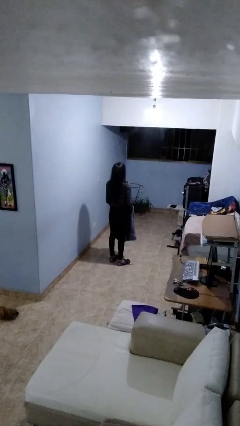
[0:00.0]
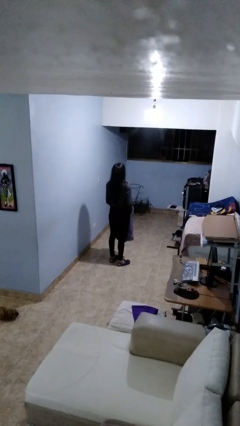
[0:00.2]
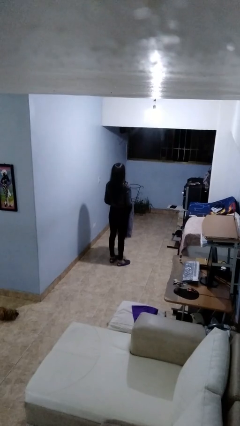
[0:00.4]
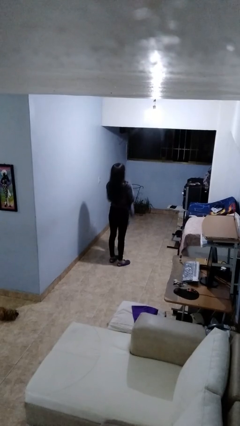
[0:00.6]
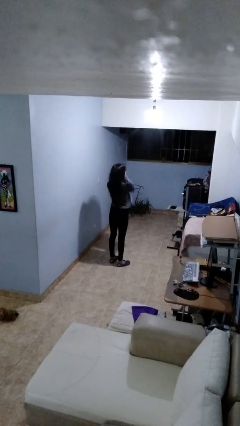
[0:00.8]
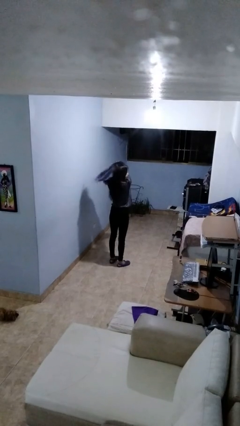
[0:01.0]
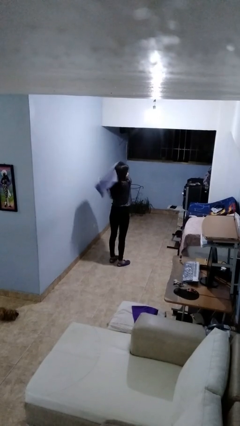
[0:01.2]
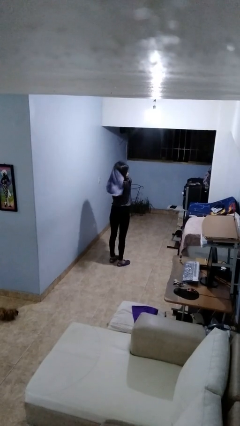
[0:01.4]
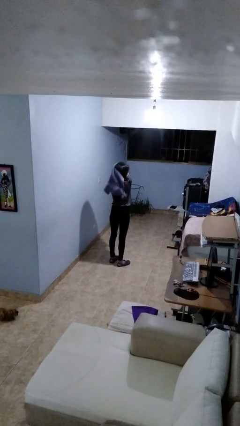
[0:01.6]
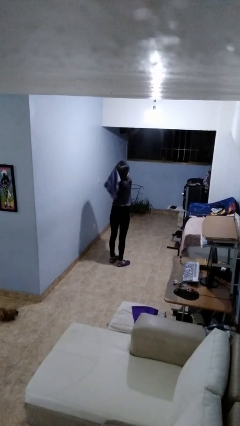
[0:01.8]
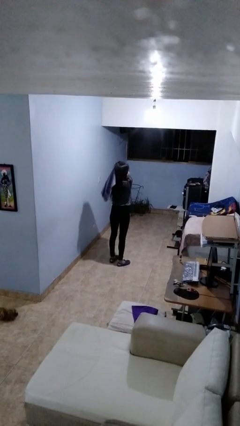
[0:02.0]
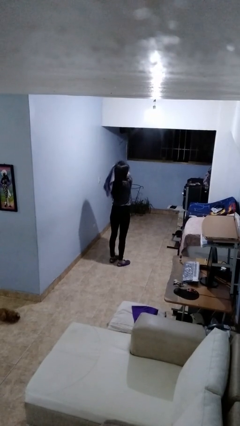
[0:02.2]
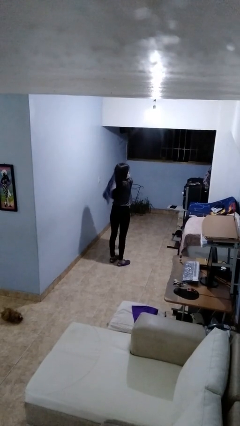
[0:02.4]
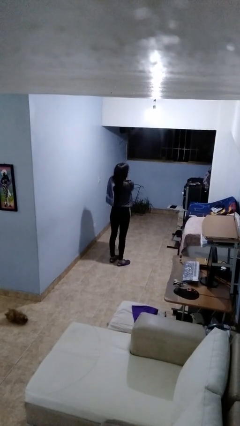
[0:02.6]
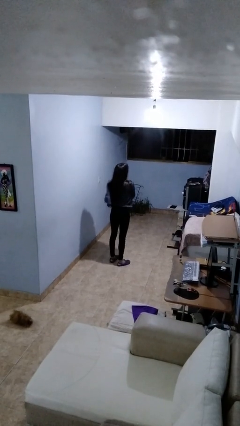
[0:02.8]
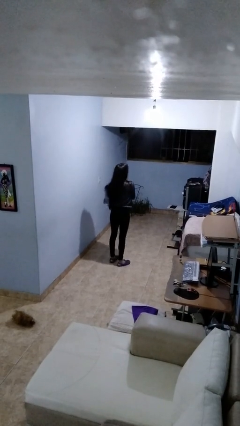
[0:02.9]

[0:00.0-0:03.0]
person dries hair with towel

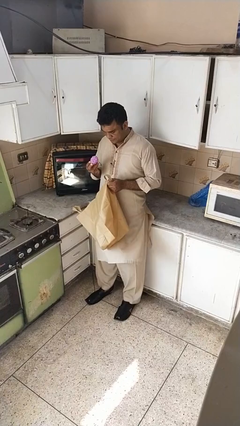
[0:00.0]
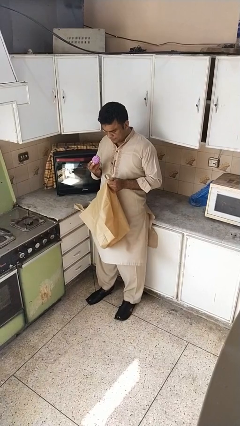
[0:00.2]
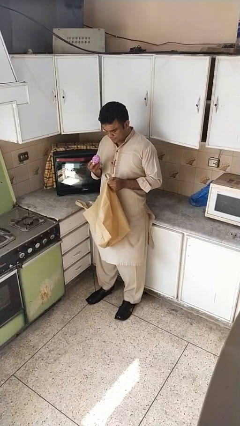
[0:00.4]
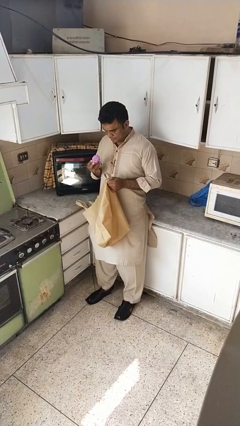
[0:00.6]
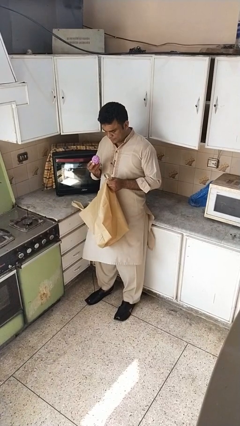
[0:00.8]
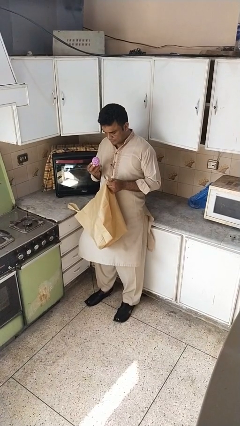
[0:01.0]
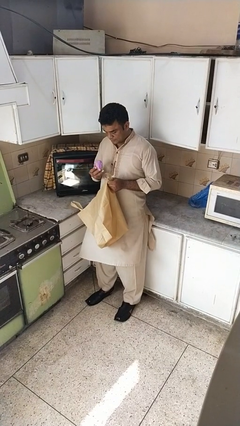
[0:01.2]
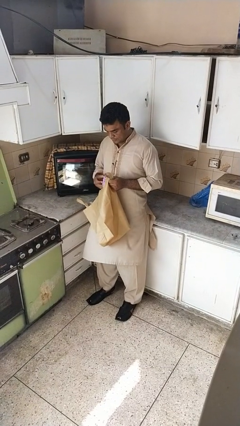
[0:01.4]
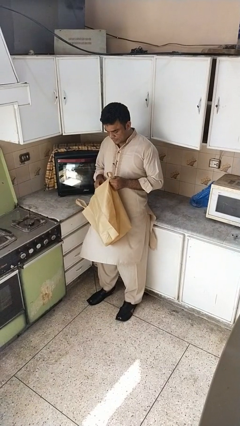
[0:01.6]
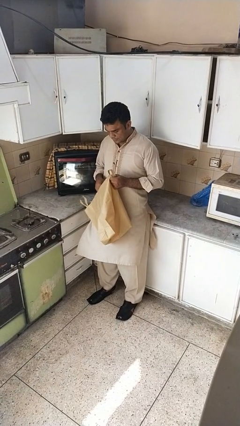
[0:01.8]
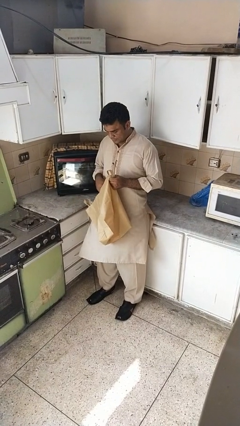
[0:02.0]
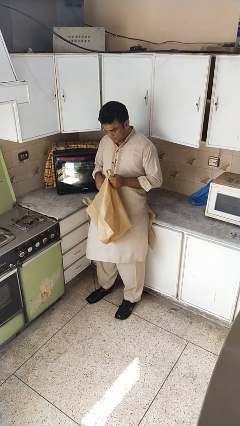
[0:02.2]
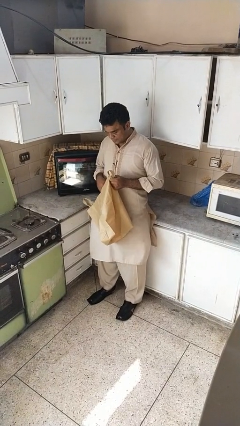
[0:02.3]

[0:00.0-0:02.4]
person puts object into bag

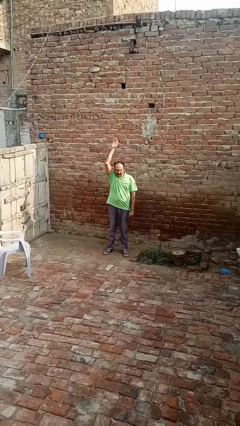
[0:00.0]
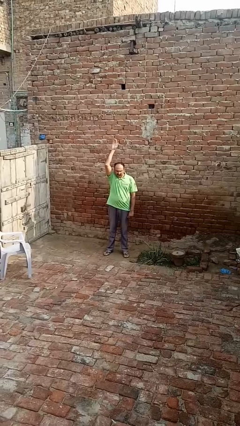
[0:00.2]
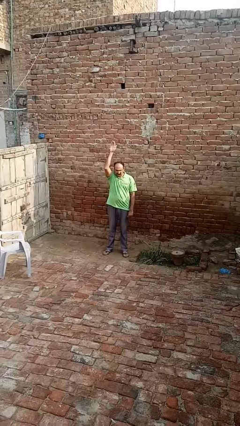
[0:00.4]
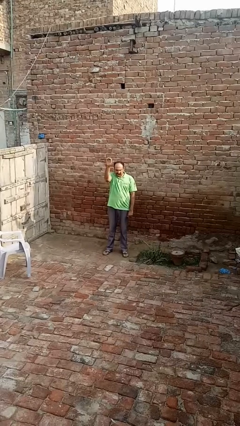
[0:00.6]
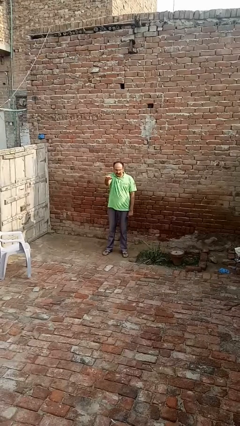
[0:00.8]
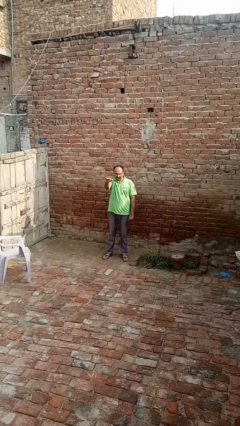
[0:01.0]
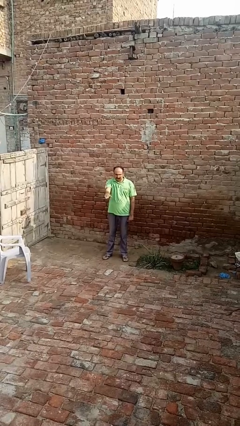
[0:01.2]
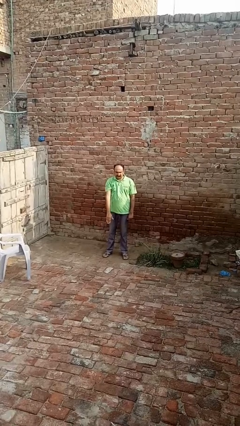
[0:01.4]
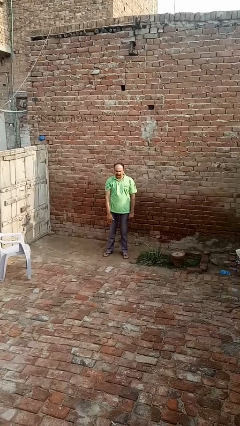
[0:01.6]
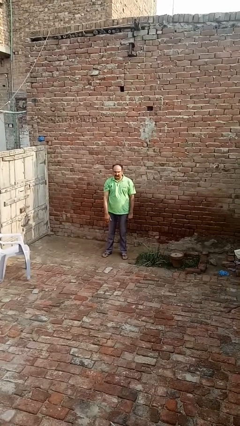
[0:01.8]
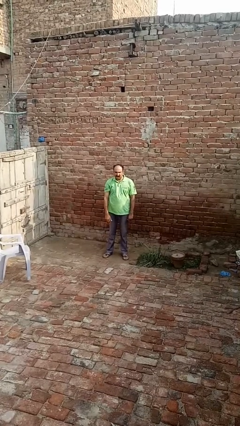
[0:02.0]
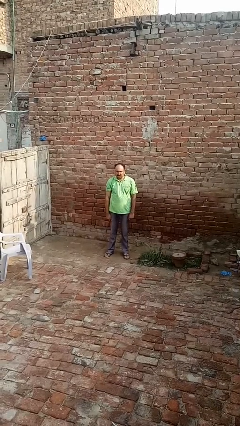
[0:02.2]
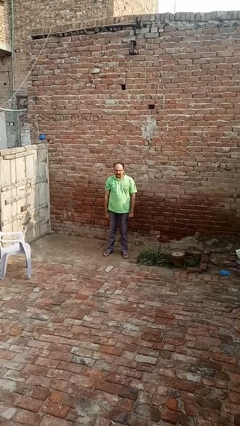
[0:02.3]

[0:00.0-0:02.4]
person gestures swipe down

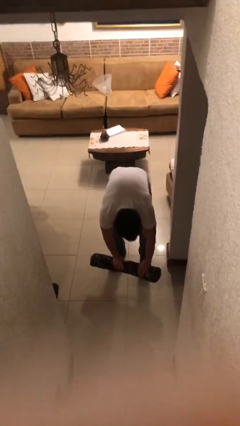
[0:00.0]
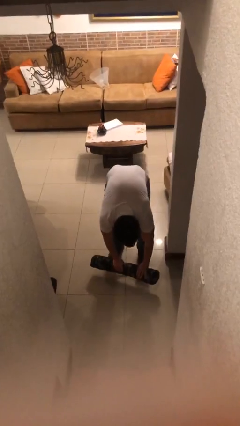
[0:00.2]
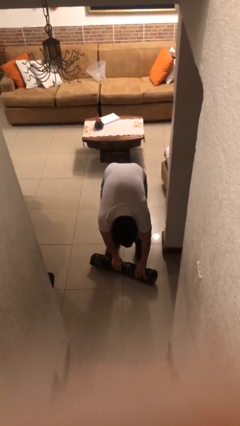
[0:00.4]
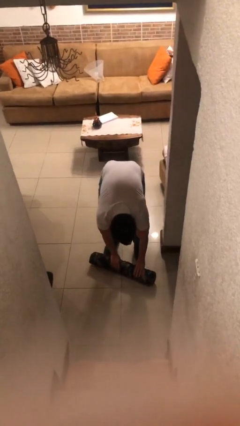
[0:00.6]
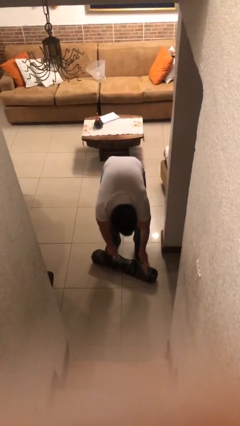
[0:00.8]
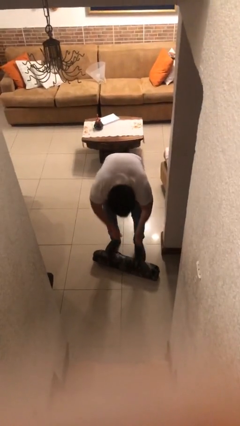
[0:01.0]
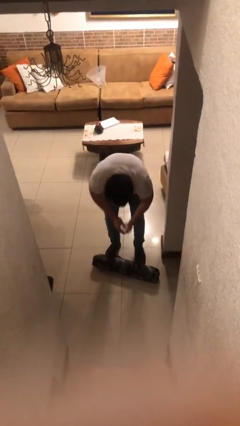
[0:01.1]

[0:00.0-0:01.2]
person puts down object on floor

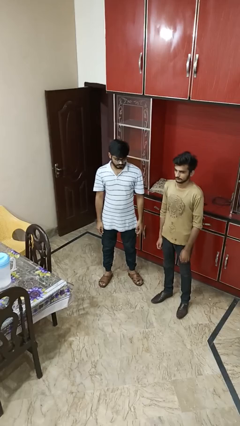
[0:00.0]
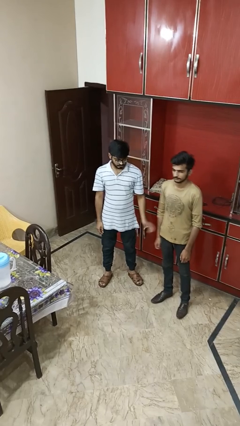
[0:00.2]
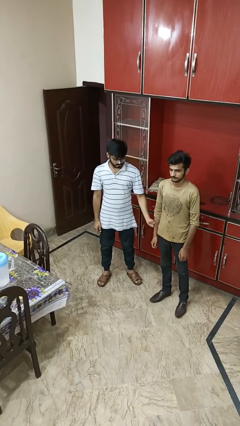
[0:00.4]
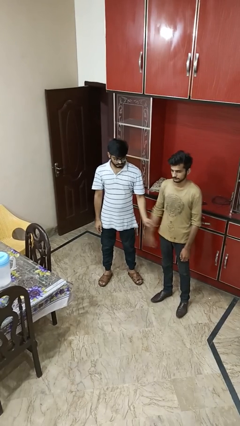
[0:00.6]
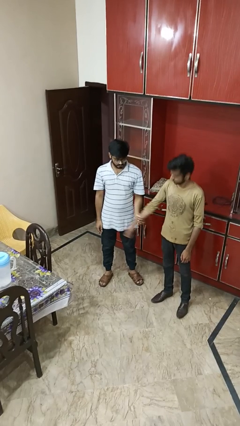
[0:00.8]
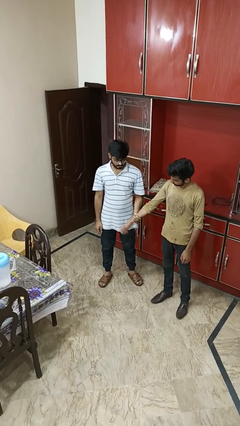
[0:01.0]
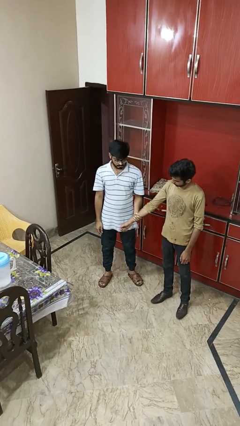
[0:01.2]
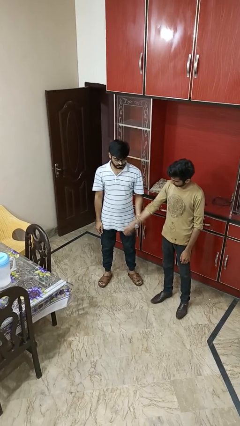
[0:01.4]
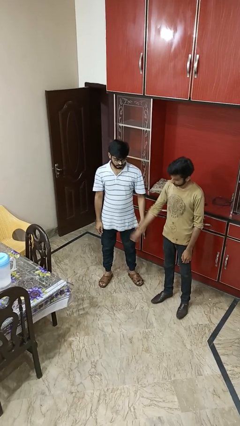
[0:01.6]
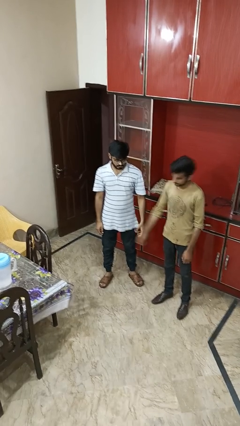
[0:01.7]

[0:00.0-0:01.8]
person grabs person by forearm

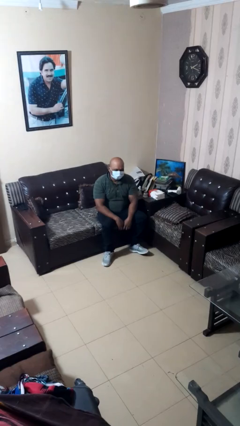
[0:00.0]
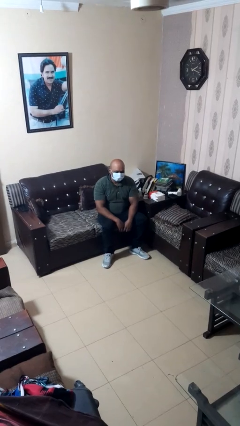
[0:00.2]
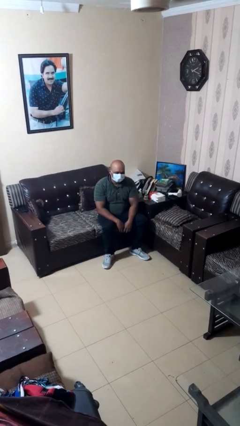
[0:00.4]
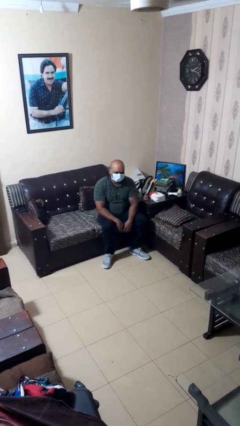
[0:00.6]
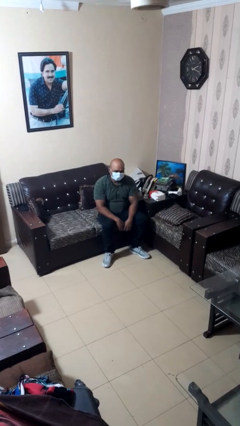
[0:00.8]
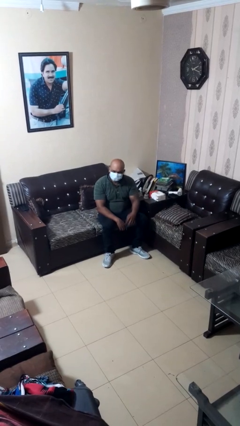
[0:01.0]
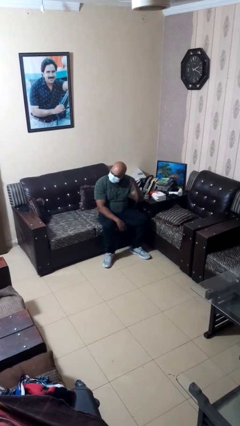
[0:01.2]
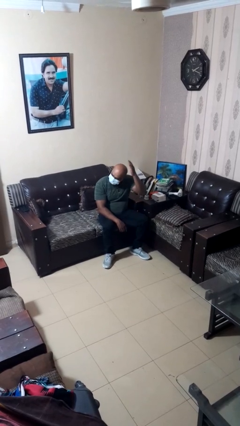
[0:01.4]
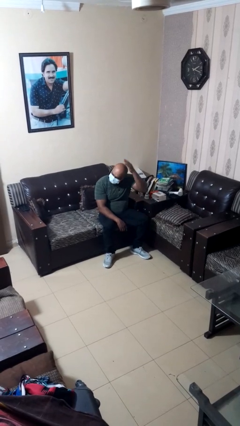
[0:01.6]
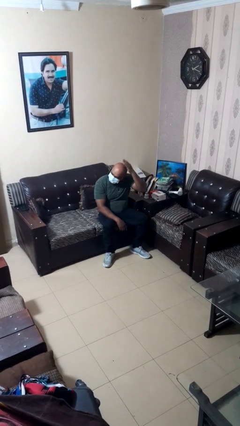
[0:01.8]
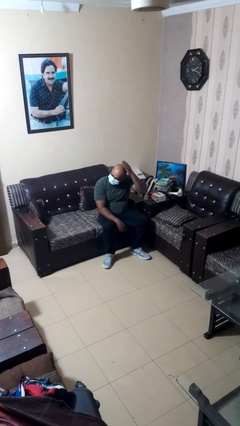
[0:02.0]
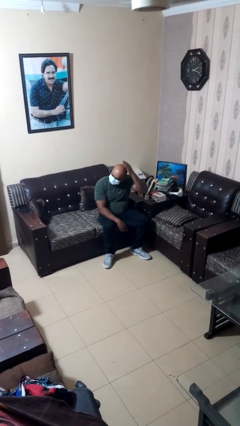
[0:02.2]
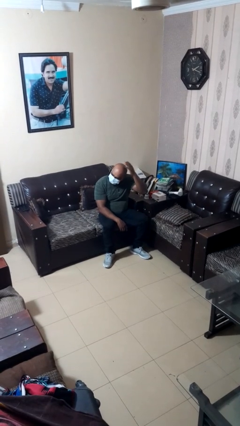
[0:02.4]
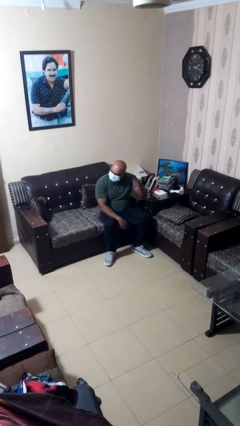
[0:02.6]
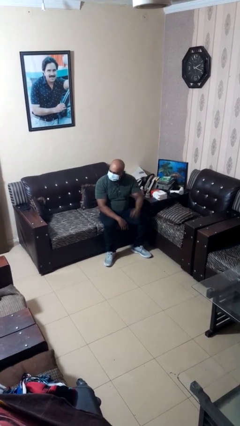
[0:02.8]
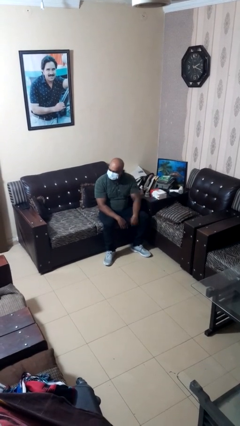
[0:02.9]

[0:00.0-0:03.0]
person pats head

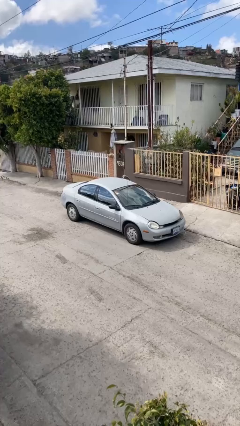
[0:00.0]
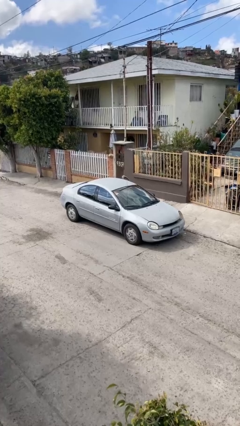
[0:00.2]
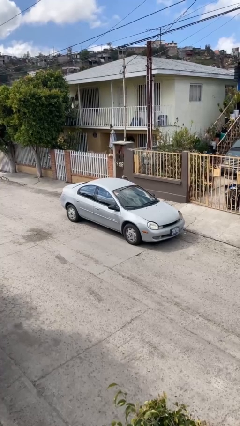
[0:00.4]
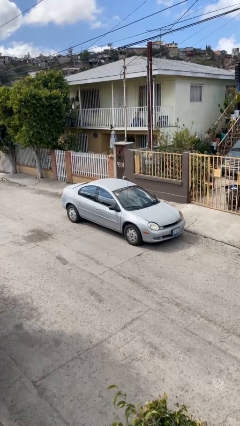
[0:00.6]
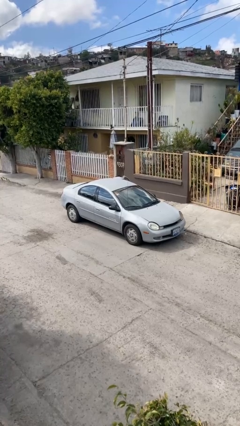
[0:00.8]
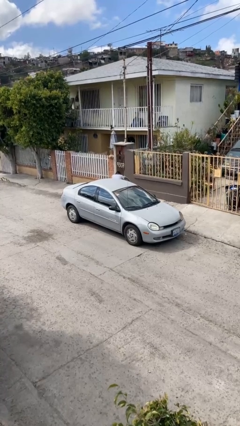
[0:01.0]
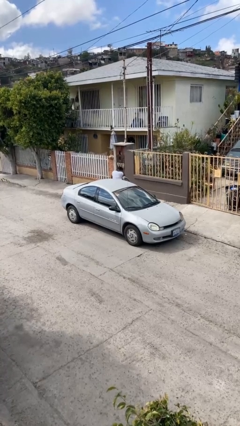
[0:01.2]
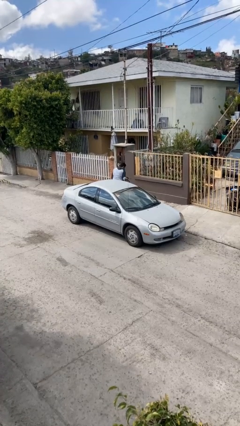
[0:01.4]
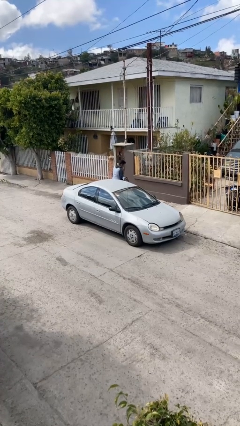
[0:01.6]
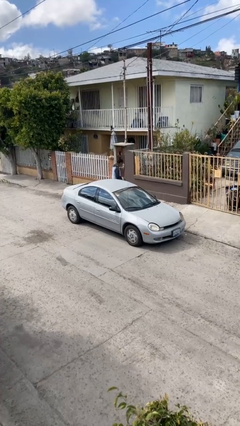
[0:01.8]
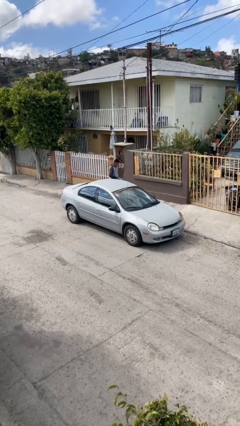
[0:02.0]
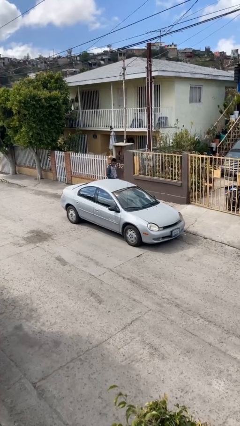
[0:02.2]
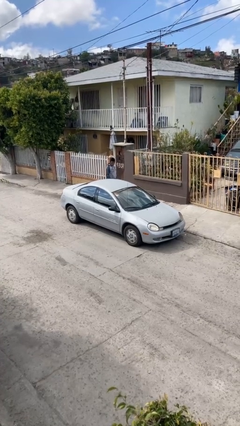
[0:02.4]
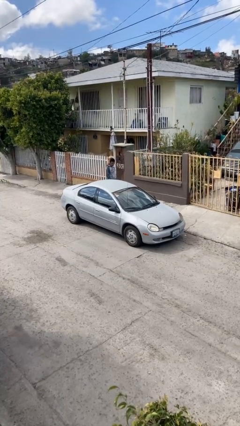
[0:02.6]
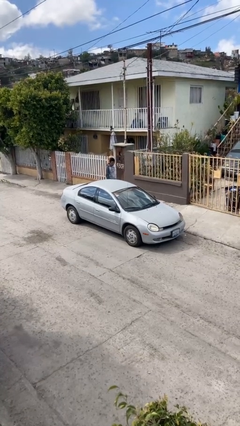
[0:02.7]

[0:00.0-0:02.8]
car drops off person

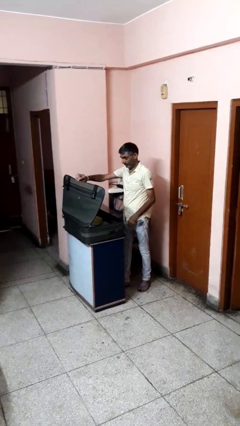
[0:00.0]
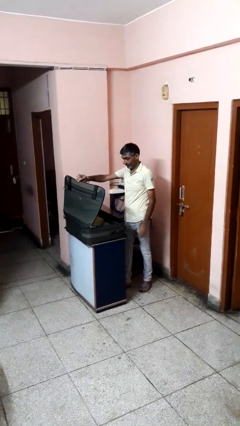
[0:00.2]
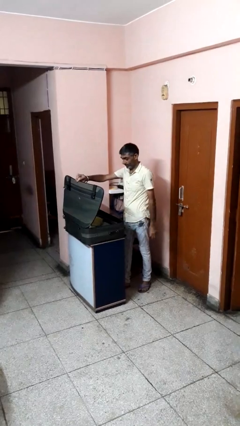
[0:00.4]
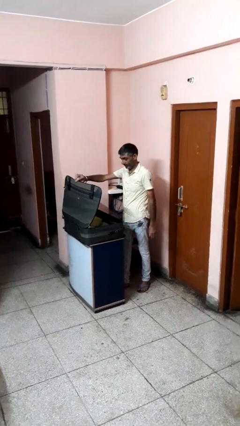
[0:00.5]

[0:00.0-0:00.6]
person opens suitcase
